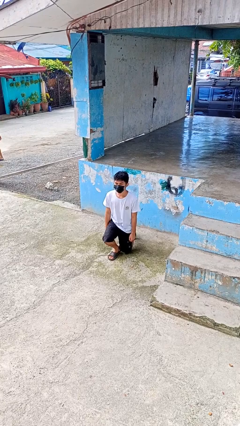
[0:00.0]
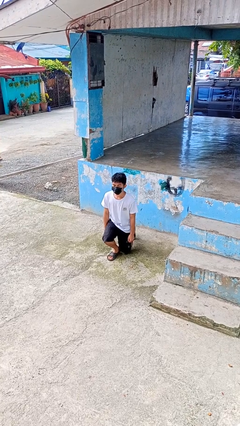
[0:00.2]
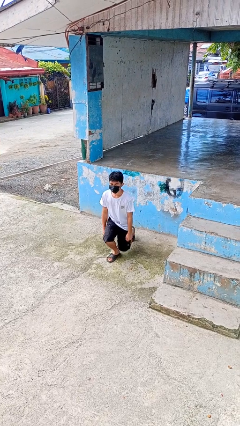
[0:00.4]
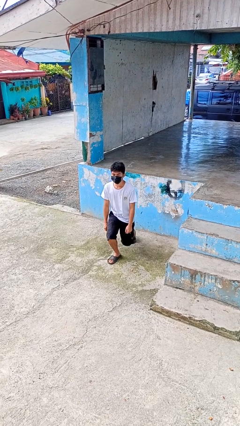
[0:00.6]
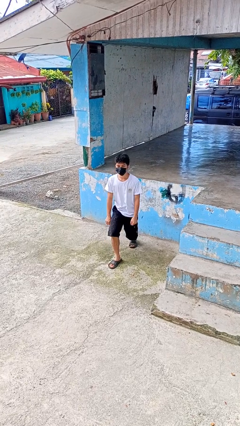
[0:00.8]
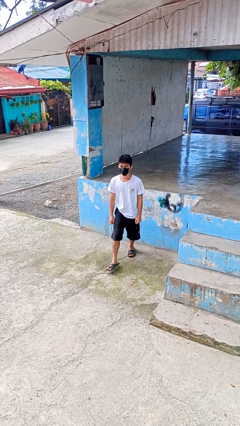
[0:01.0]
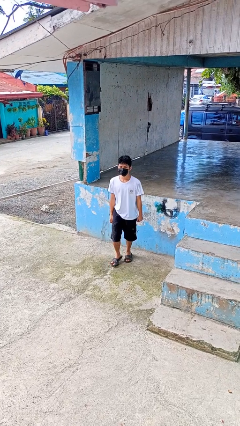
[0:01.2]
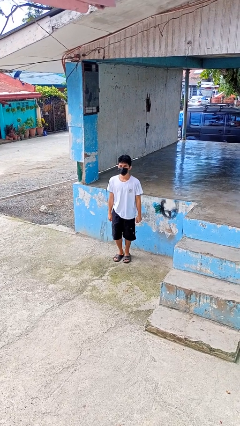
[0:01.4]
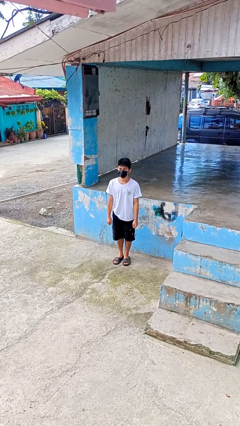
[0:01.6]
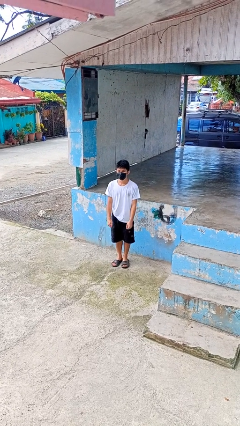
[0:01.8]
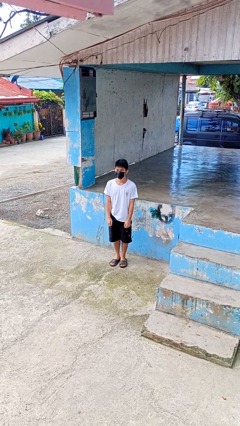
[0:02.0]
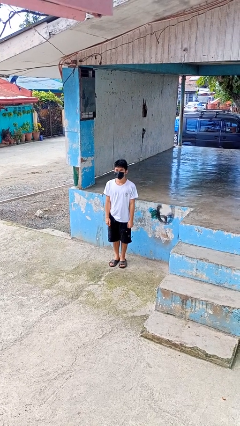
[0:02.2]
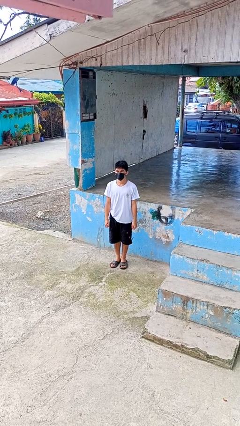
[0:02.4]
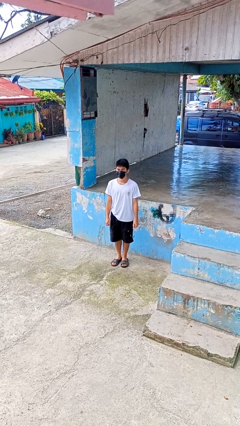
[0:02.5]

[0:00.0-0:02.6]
person stands up from floor

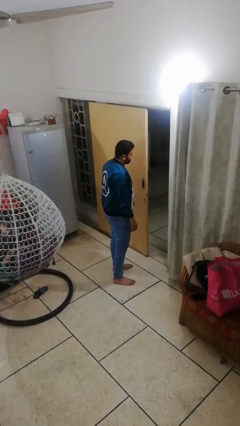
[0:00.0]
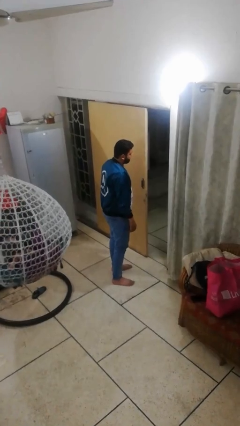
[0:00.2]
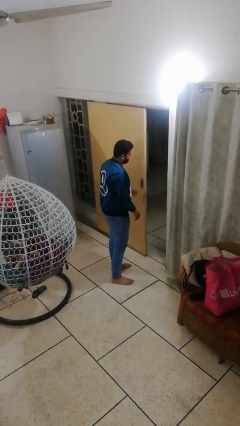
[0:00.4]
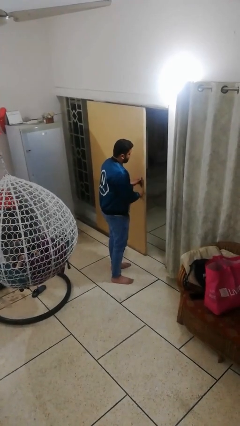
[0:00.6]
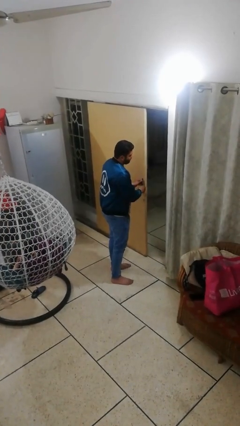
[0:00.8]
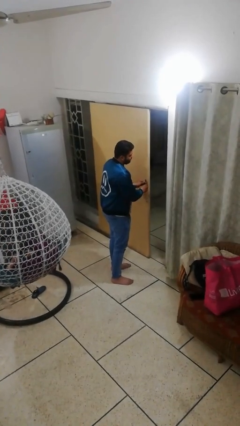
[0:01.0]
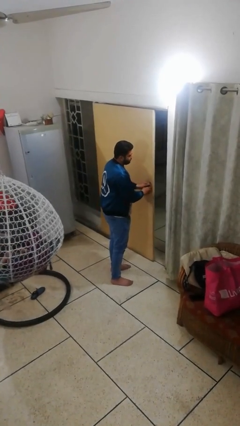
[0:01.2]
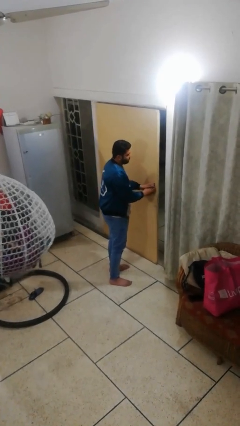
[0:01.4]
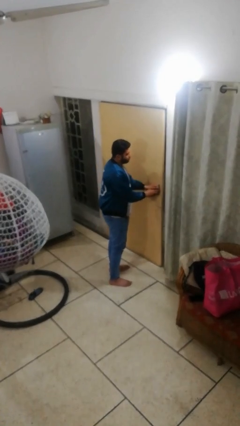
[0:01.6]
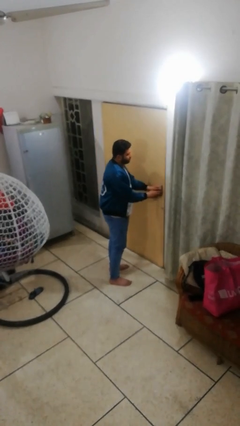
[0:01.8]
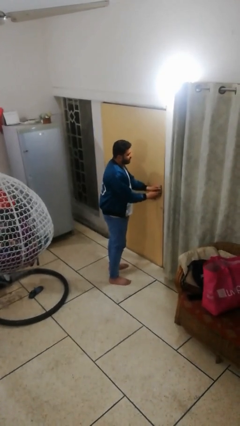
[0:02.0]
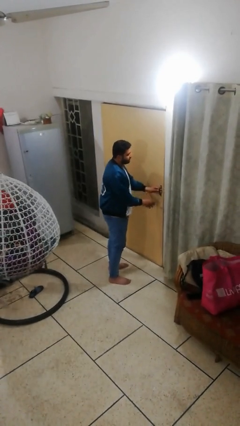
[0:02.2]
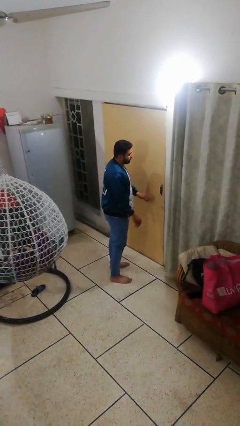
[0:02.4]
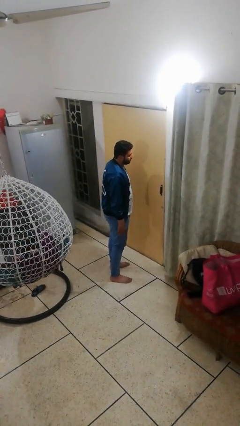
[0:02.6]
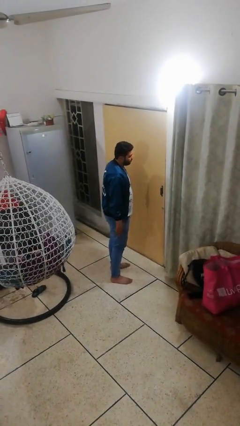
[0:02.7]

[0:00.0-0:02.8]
person closes facility door

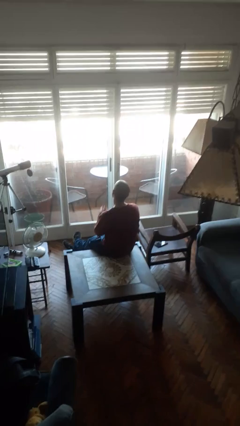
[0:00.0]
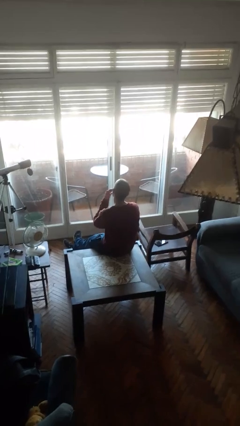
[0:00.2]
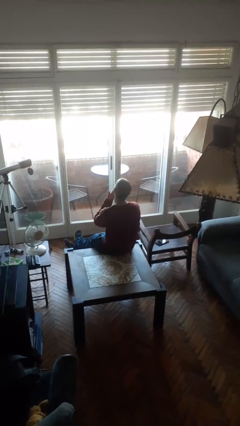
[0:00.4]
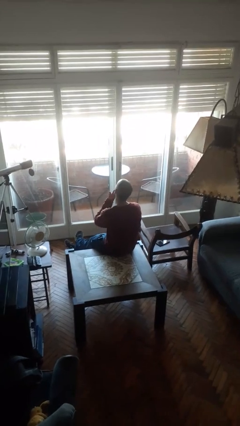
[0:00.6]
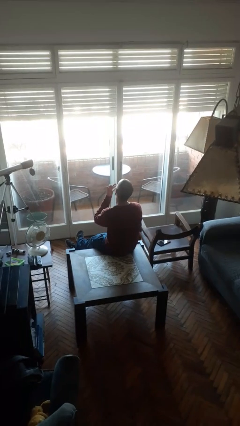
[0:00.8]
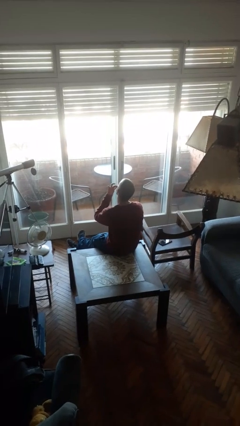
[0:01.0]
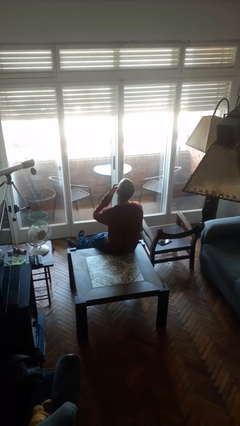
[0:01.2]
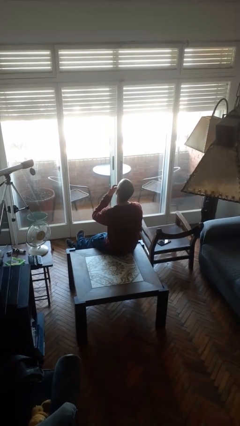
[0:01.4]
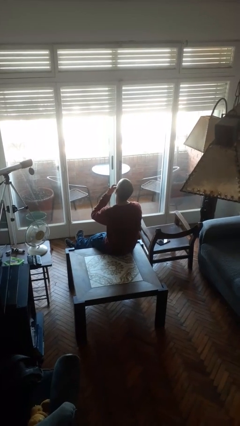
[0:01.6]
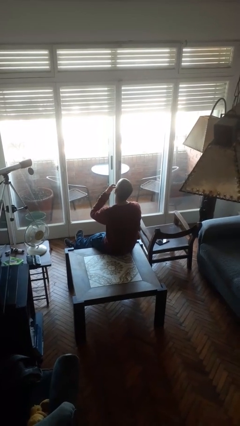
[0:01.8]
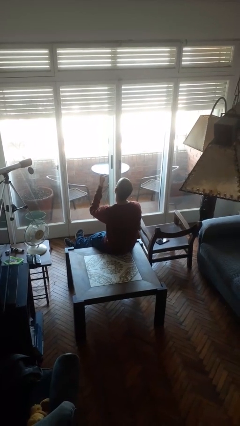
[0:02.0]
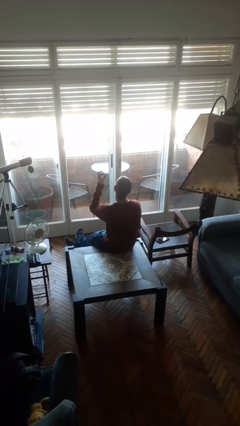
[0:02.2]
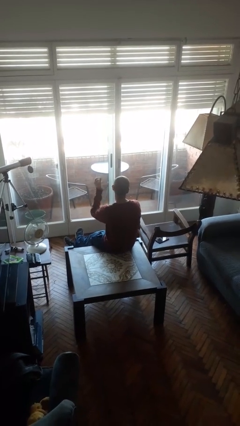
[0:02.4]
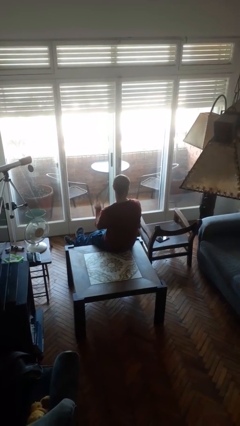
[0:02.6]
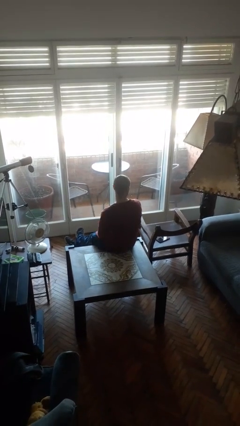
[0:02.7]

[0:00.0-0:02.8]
person licks fingers

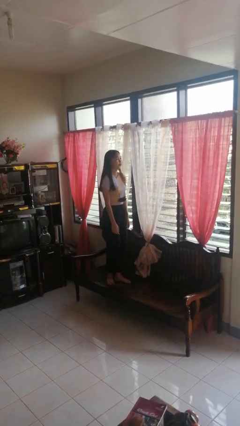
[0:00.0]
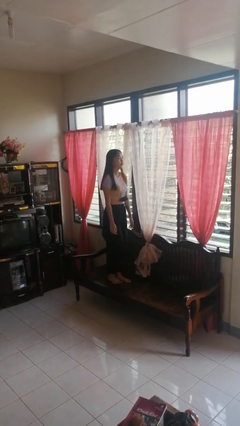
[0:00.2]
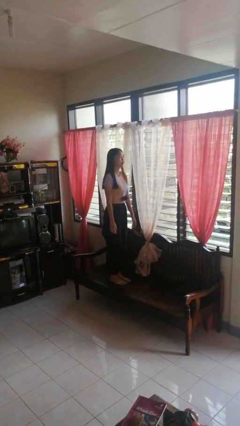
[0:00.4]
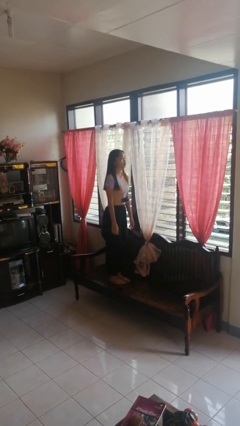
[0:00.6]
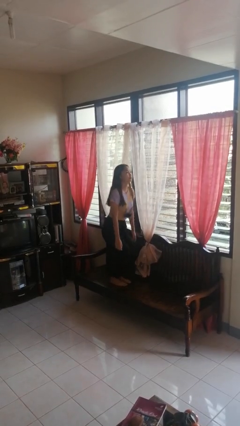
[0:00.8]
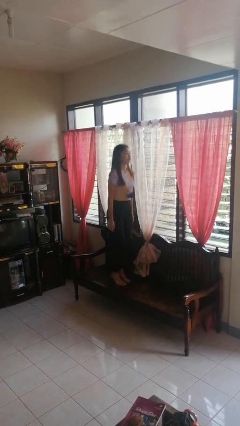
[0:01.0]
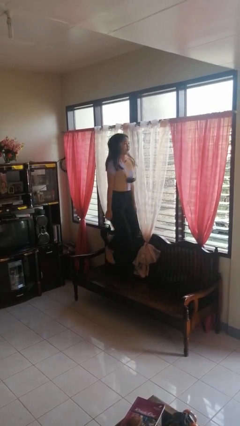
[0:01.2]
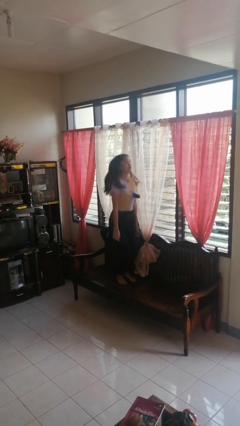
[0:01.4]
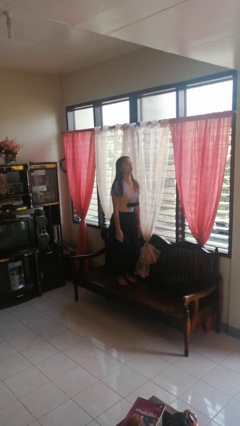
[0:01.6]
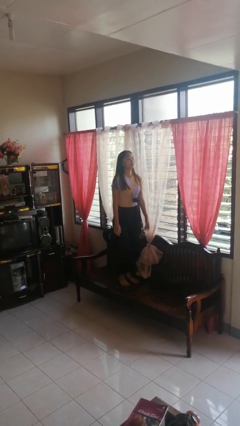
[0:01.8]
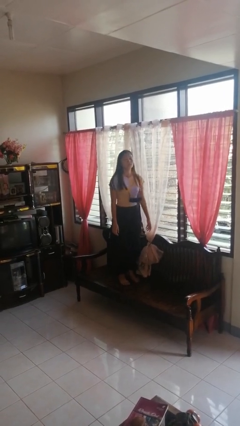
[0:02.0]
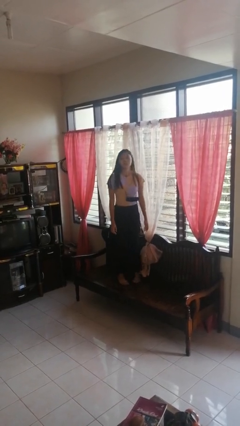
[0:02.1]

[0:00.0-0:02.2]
person jumps on couch

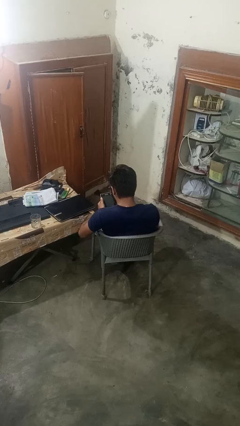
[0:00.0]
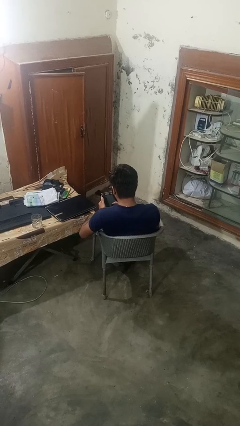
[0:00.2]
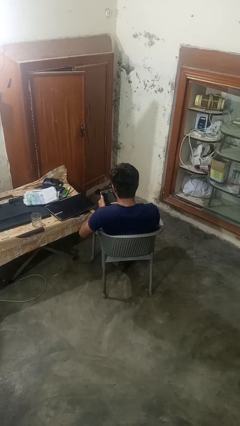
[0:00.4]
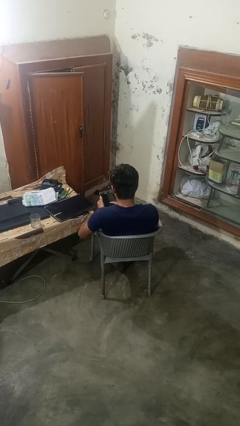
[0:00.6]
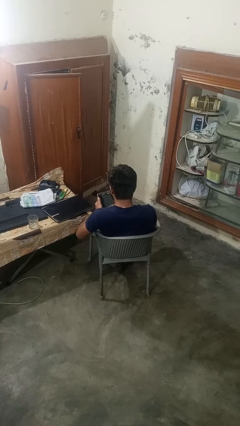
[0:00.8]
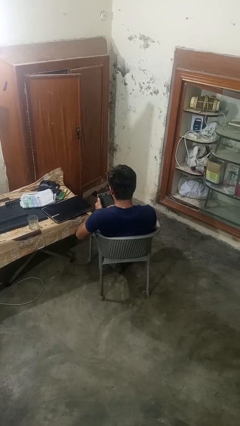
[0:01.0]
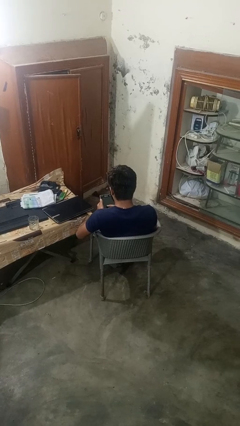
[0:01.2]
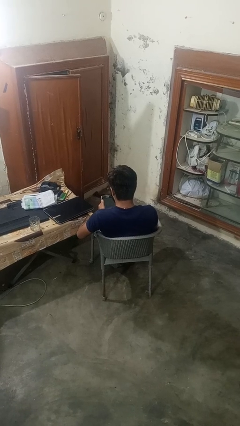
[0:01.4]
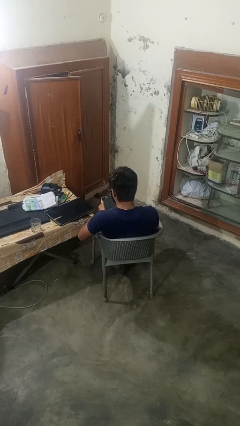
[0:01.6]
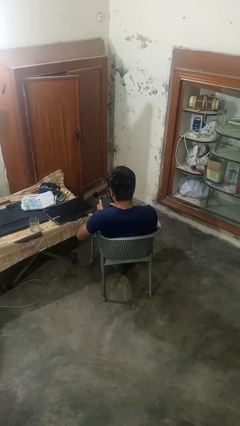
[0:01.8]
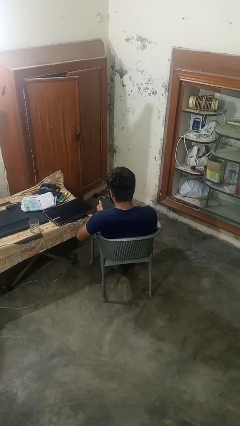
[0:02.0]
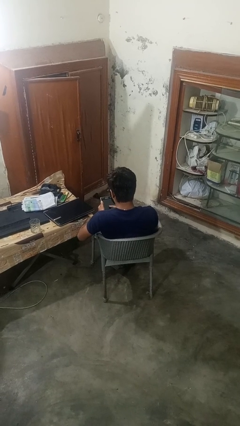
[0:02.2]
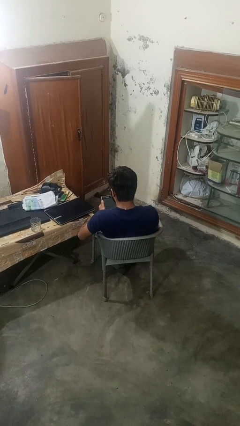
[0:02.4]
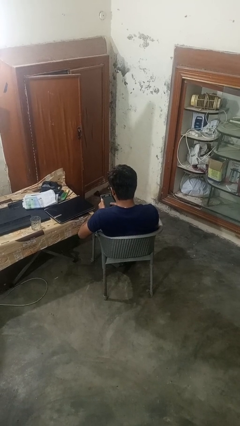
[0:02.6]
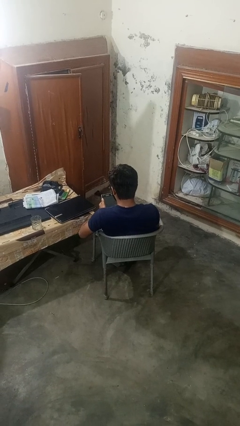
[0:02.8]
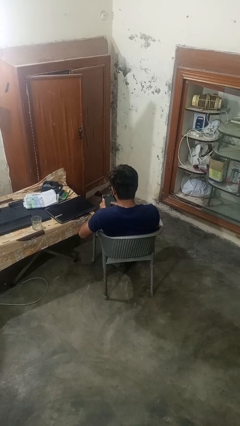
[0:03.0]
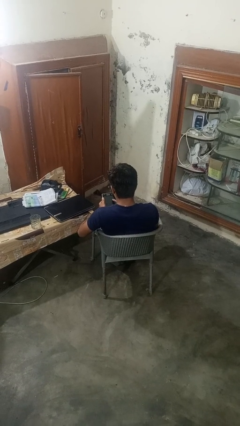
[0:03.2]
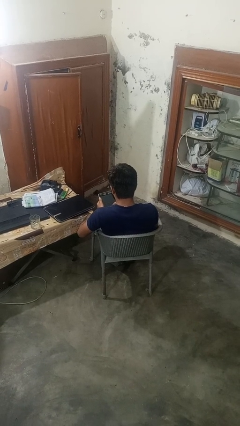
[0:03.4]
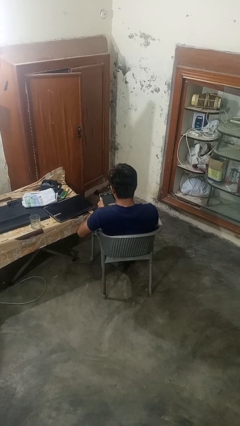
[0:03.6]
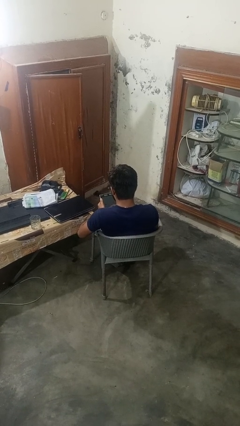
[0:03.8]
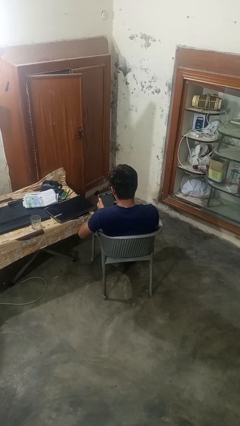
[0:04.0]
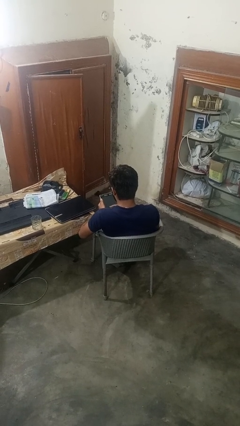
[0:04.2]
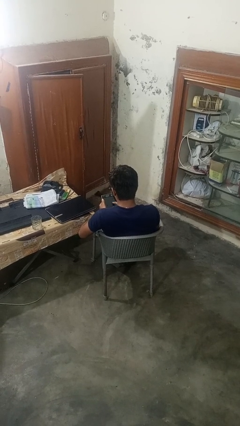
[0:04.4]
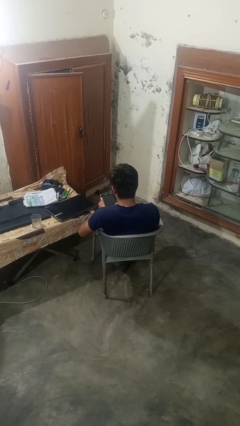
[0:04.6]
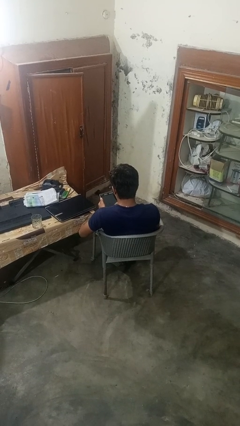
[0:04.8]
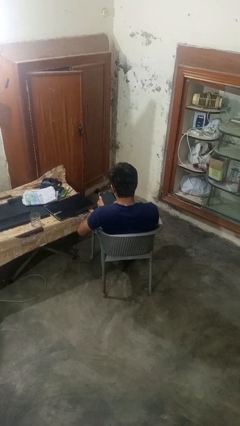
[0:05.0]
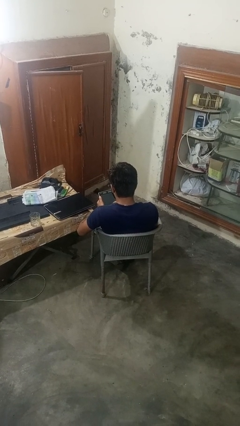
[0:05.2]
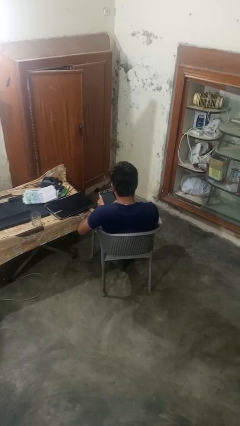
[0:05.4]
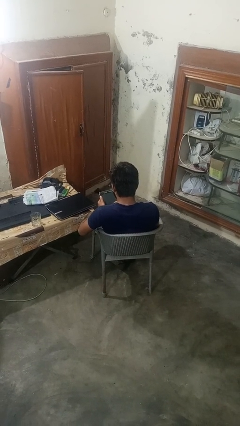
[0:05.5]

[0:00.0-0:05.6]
person interacts with tablet

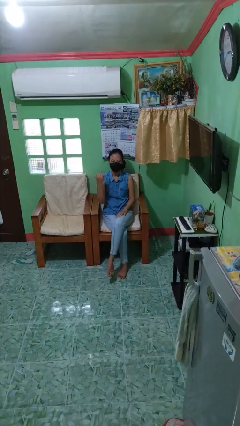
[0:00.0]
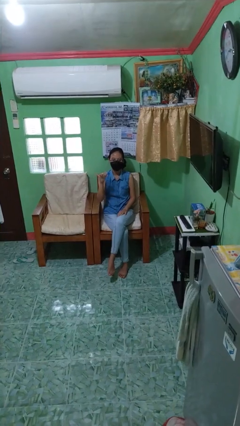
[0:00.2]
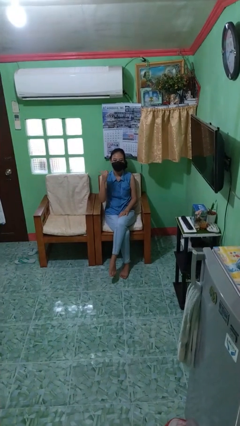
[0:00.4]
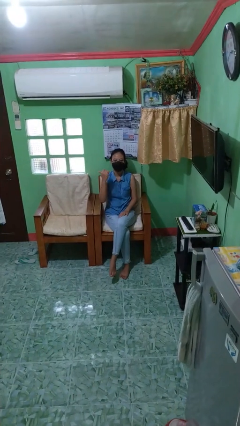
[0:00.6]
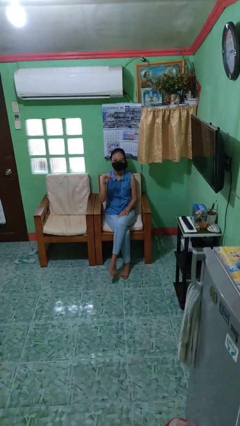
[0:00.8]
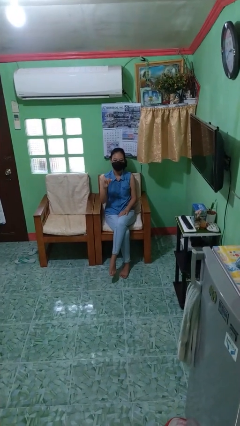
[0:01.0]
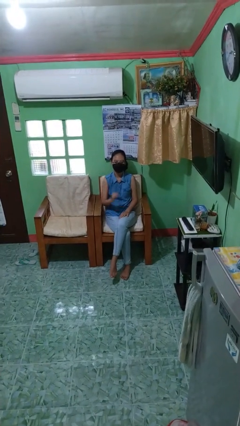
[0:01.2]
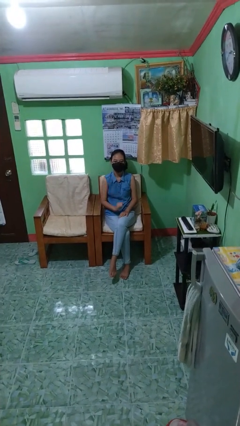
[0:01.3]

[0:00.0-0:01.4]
person gestures hang loose
